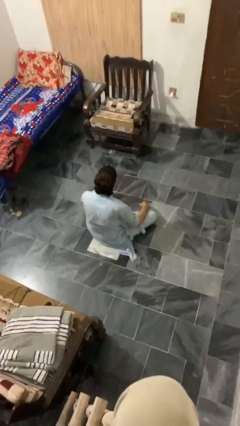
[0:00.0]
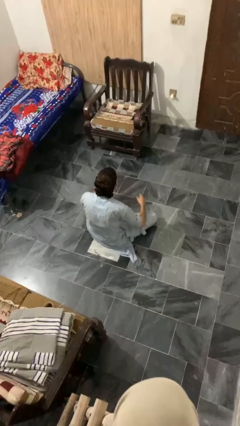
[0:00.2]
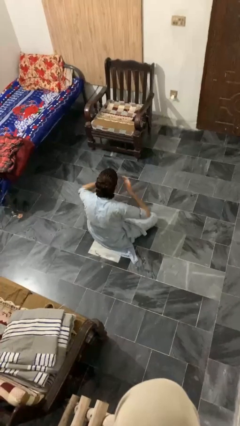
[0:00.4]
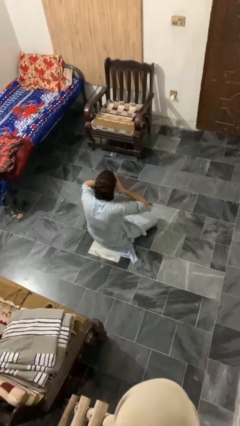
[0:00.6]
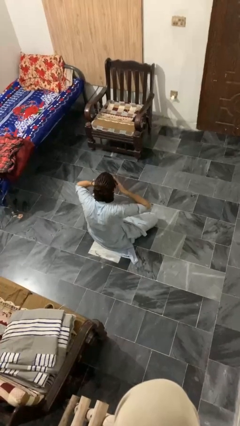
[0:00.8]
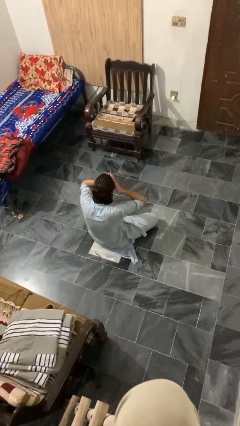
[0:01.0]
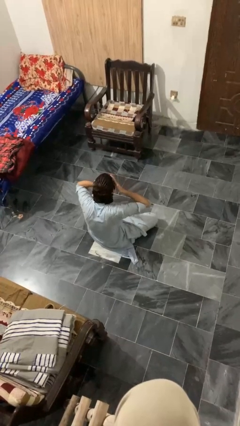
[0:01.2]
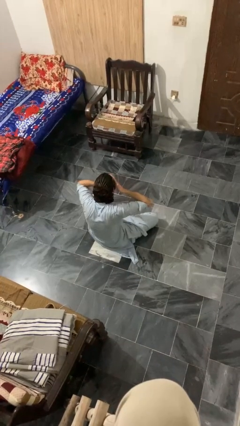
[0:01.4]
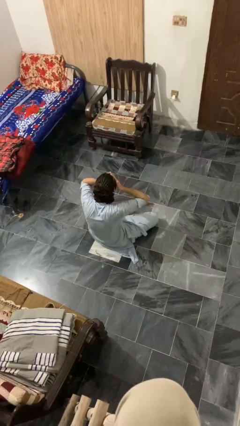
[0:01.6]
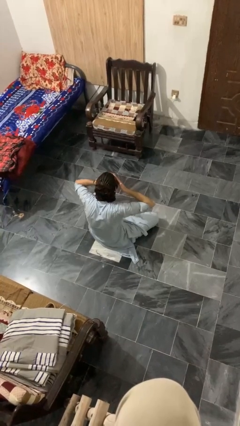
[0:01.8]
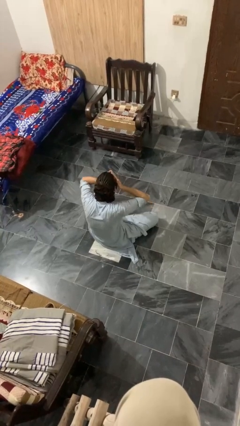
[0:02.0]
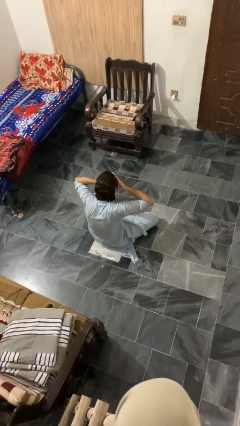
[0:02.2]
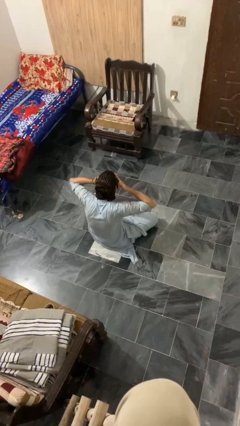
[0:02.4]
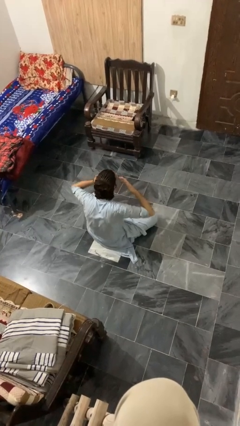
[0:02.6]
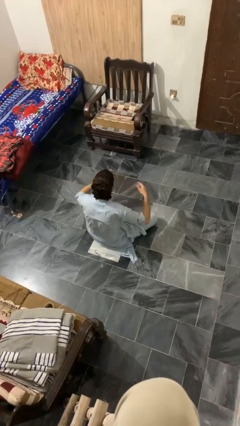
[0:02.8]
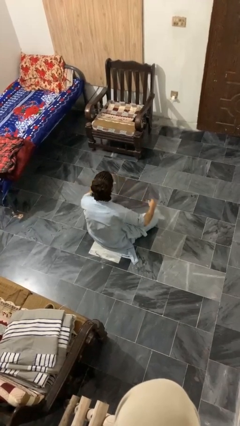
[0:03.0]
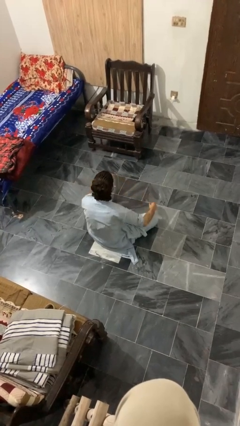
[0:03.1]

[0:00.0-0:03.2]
person rubs eyes

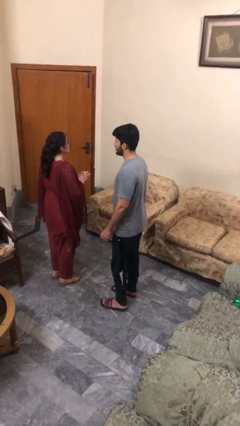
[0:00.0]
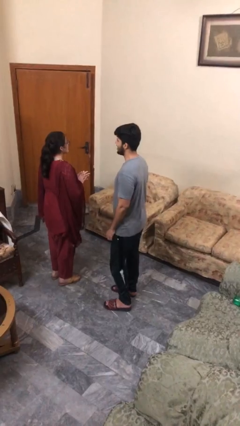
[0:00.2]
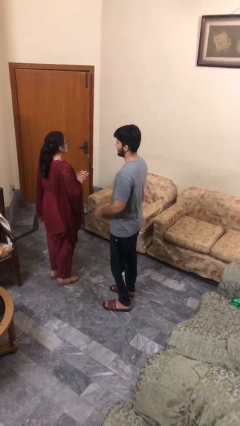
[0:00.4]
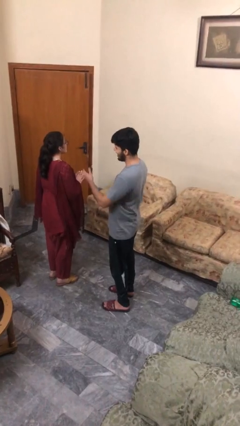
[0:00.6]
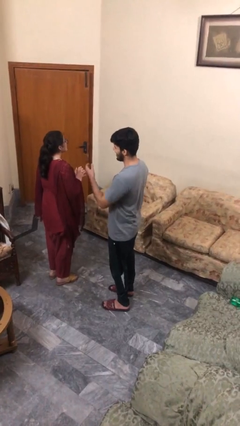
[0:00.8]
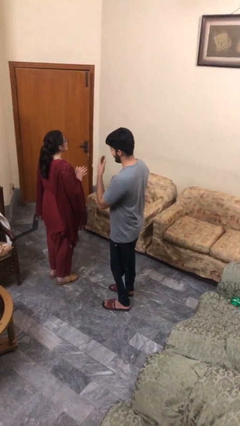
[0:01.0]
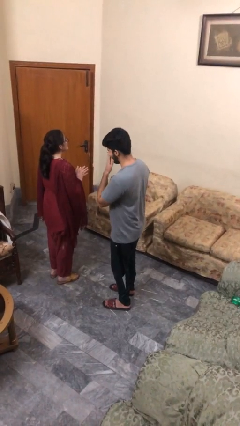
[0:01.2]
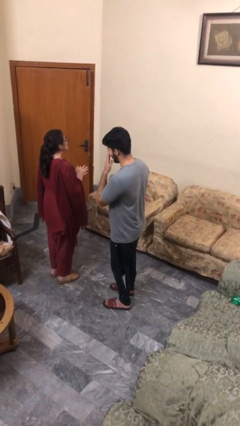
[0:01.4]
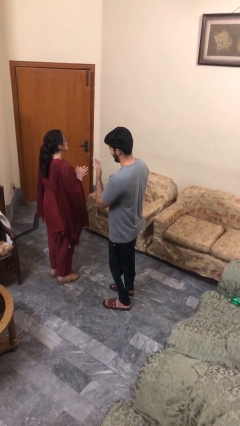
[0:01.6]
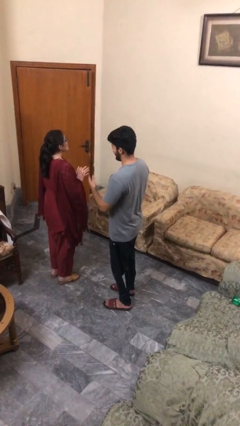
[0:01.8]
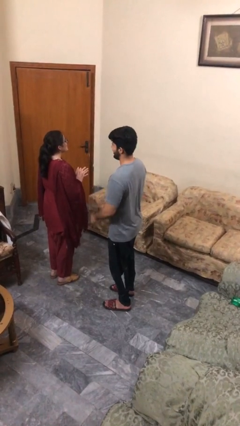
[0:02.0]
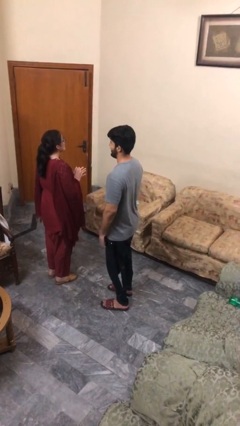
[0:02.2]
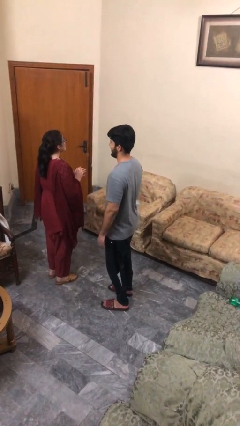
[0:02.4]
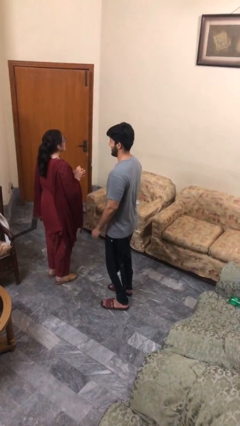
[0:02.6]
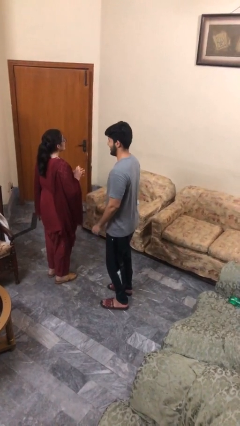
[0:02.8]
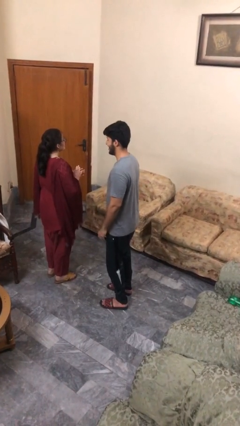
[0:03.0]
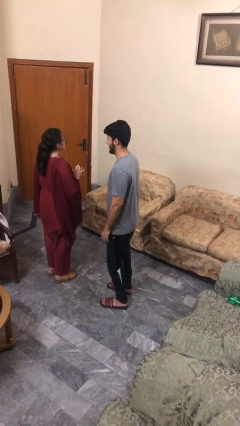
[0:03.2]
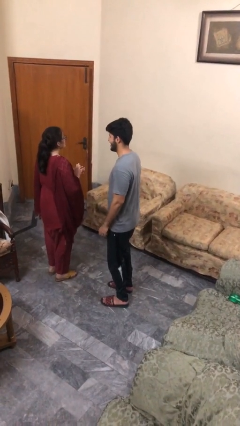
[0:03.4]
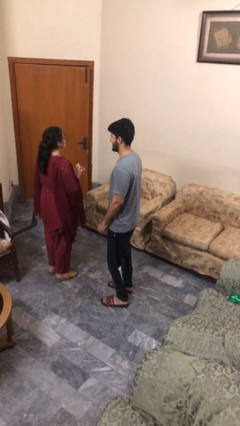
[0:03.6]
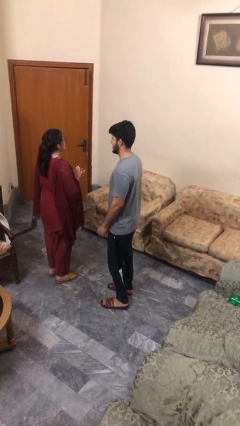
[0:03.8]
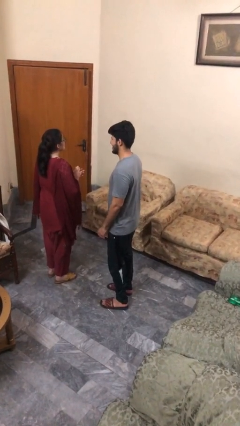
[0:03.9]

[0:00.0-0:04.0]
person laughs with person

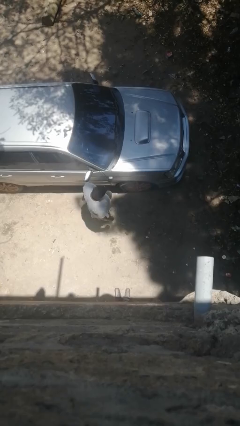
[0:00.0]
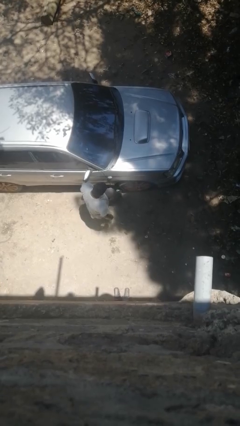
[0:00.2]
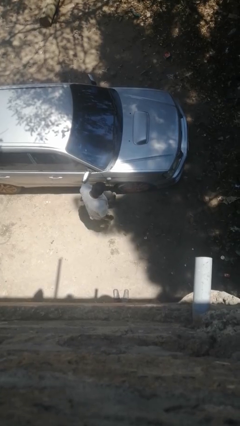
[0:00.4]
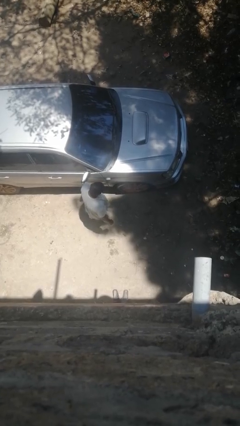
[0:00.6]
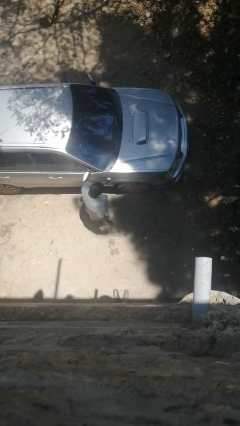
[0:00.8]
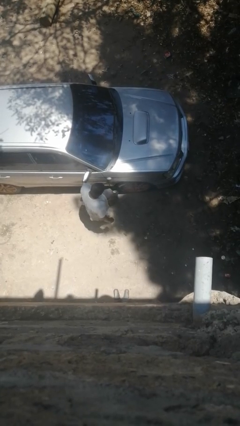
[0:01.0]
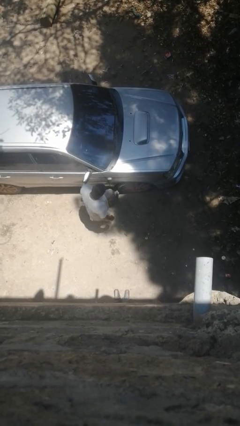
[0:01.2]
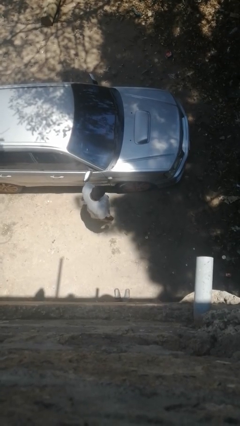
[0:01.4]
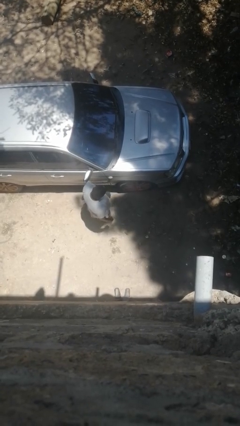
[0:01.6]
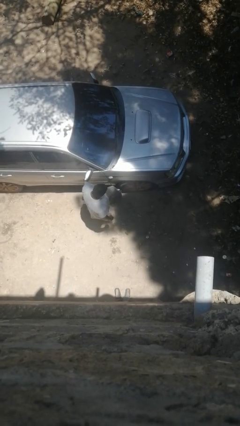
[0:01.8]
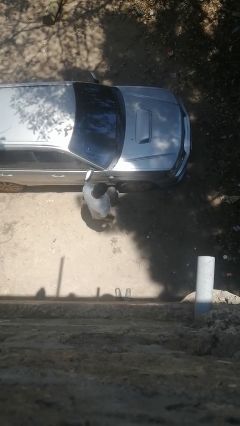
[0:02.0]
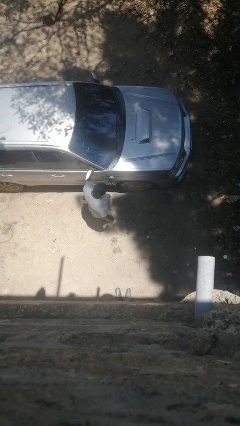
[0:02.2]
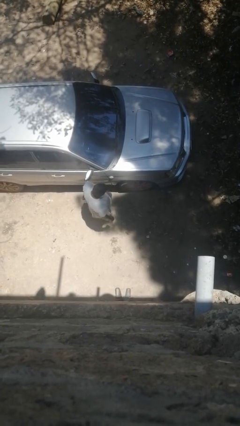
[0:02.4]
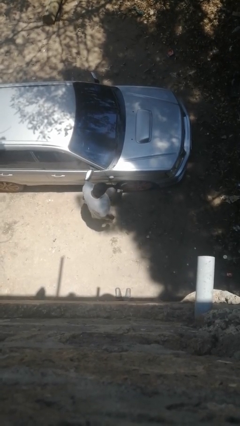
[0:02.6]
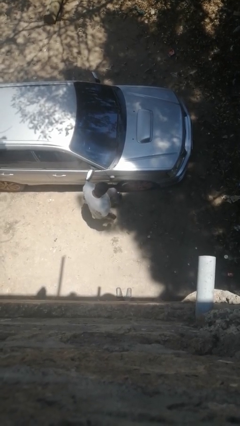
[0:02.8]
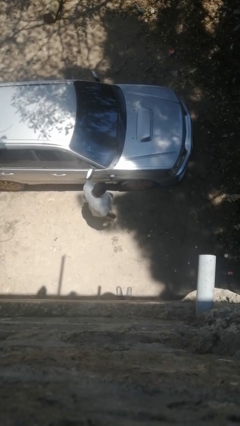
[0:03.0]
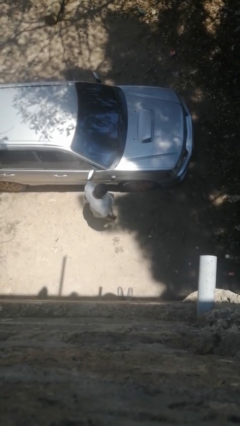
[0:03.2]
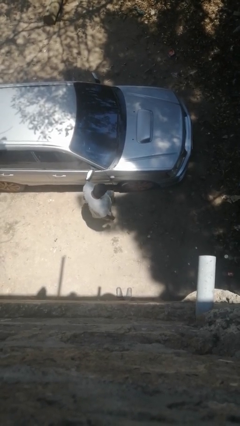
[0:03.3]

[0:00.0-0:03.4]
person kicks car tires

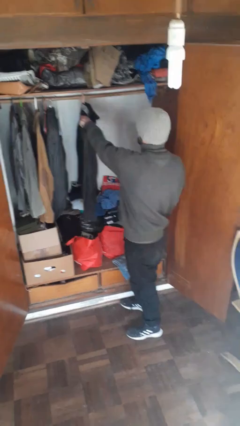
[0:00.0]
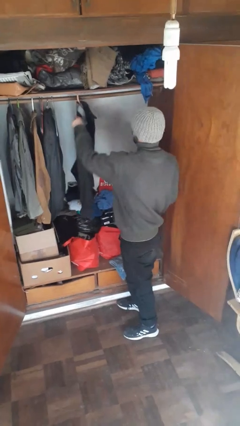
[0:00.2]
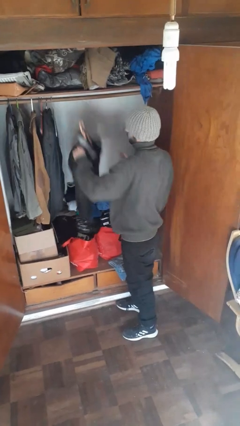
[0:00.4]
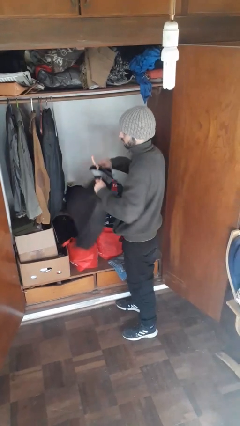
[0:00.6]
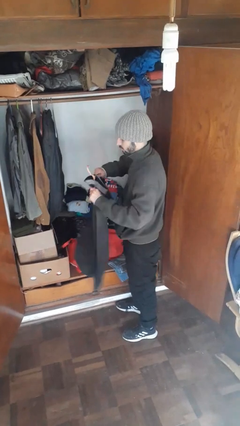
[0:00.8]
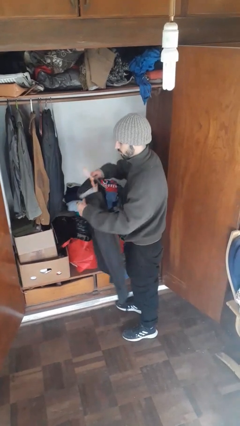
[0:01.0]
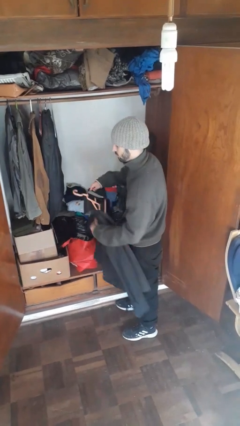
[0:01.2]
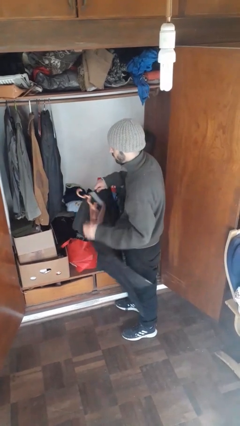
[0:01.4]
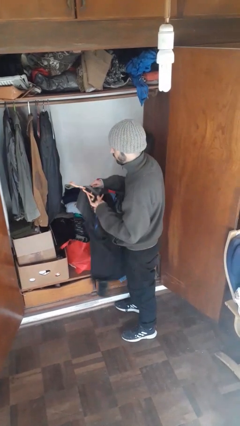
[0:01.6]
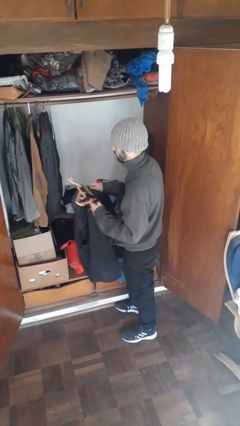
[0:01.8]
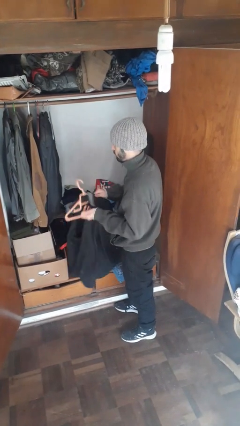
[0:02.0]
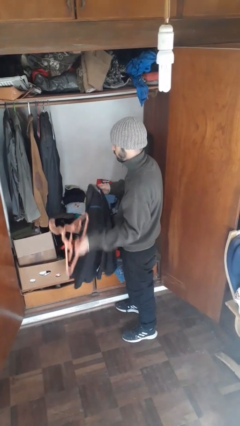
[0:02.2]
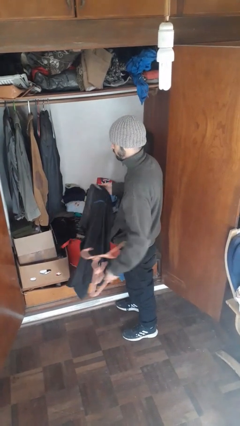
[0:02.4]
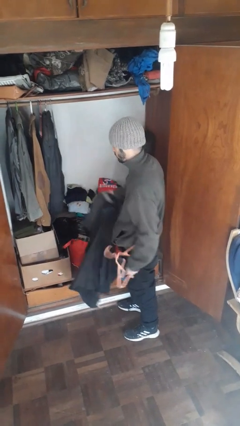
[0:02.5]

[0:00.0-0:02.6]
person takes clothes from closet

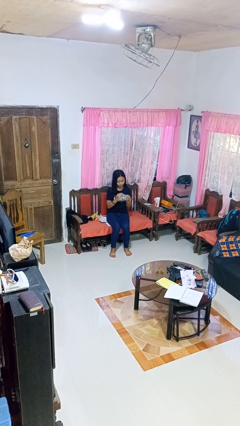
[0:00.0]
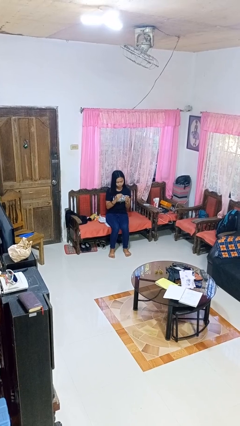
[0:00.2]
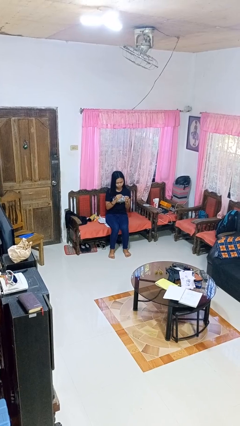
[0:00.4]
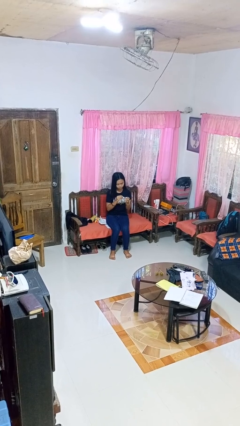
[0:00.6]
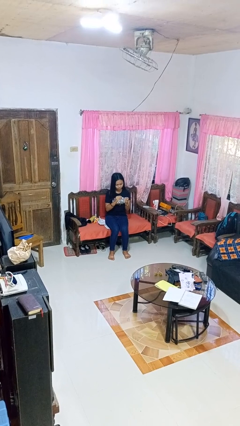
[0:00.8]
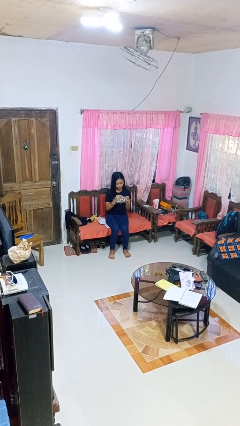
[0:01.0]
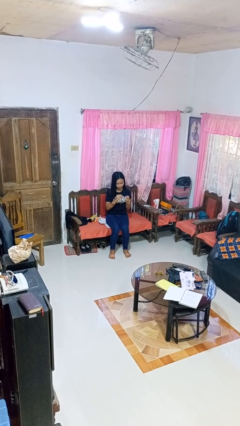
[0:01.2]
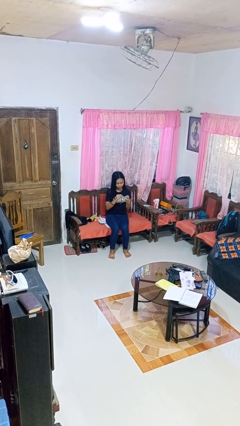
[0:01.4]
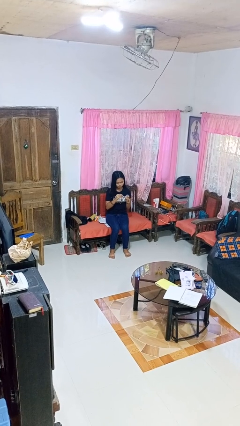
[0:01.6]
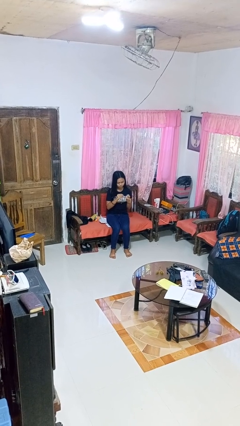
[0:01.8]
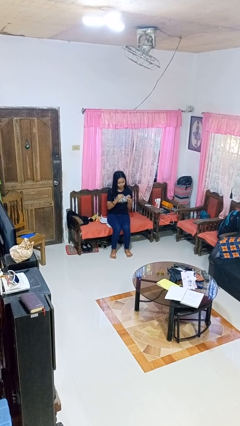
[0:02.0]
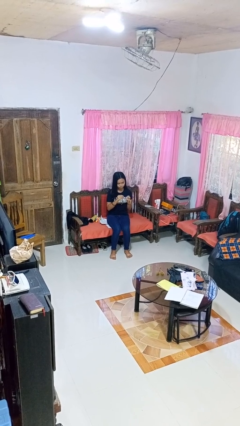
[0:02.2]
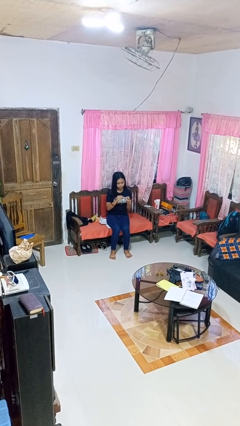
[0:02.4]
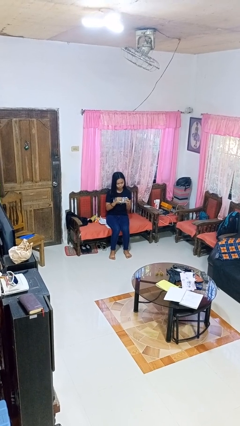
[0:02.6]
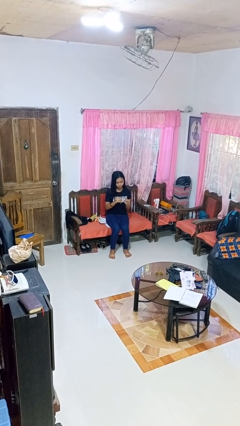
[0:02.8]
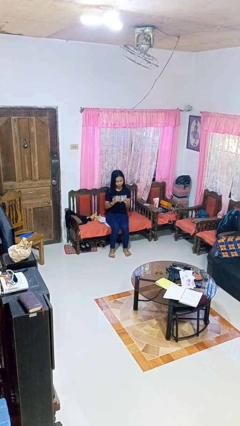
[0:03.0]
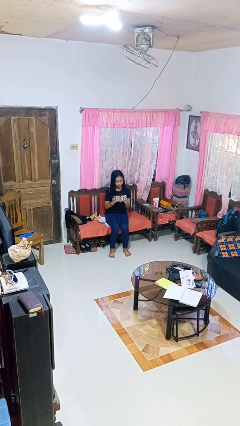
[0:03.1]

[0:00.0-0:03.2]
person clips fingernails

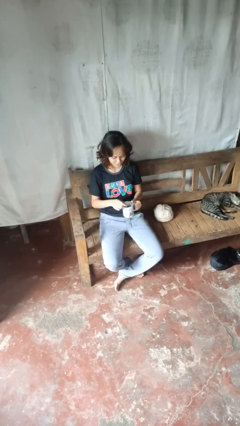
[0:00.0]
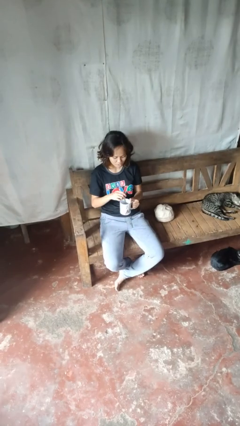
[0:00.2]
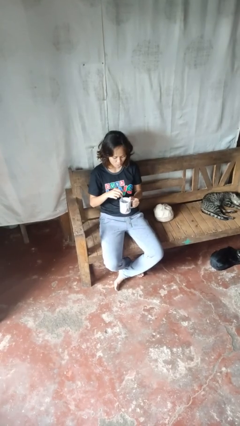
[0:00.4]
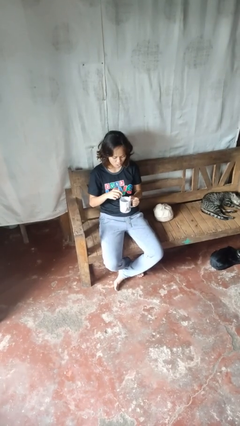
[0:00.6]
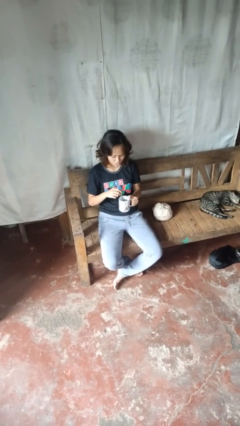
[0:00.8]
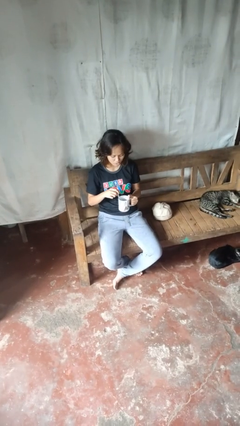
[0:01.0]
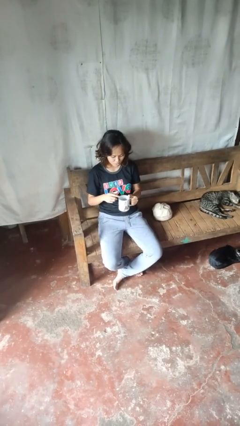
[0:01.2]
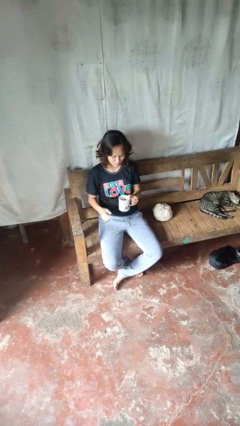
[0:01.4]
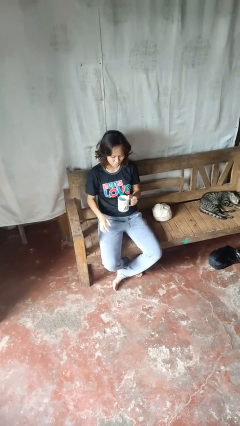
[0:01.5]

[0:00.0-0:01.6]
person stirs mug
